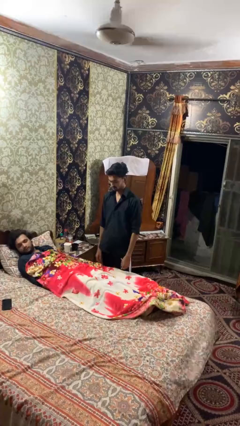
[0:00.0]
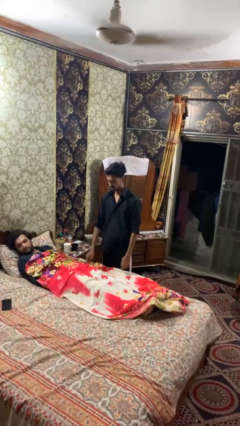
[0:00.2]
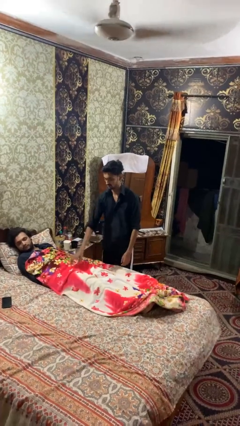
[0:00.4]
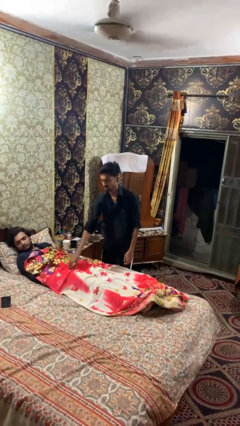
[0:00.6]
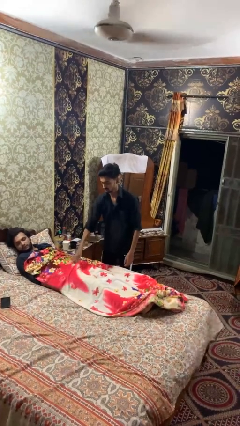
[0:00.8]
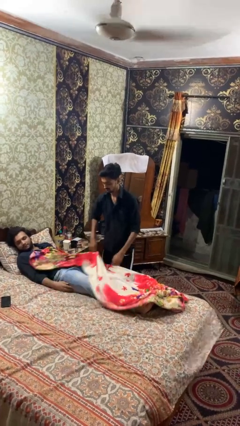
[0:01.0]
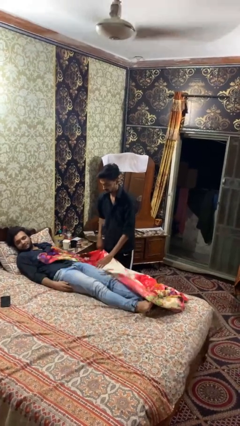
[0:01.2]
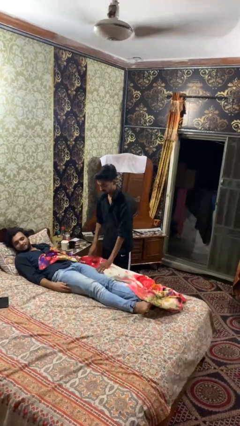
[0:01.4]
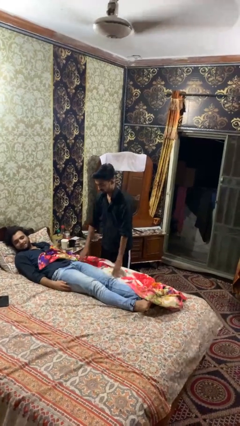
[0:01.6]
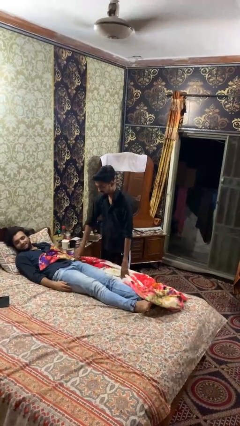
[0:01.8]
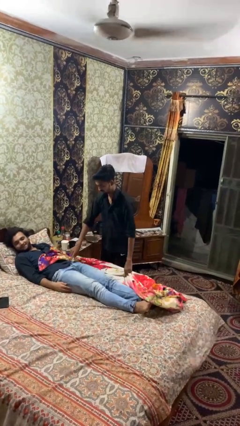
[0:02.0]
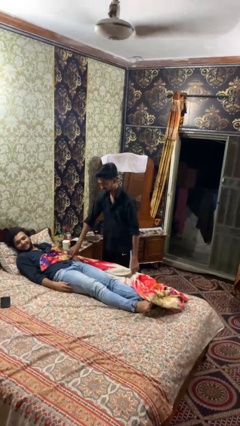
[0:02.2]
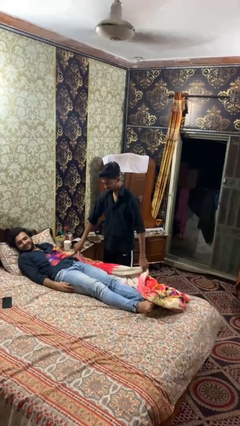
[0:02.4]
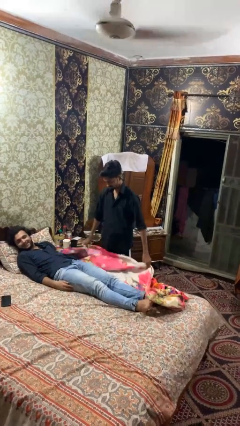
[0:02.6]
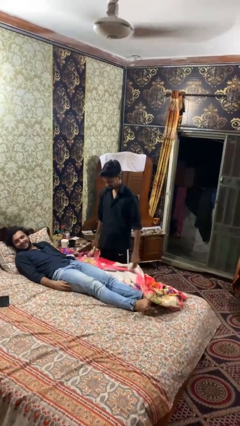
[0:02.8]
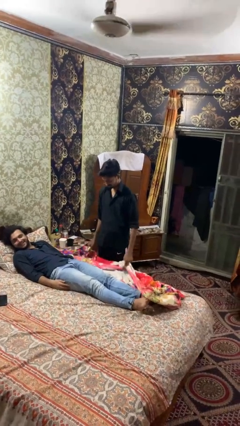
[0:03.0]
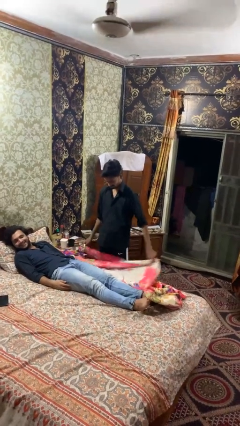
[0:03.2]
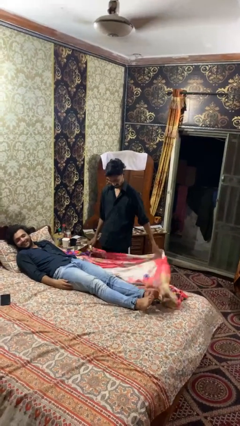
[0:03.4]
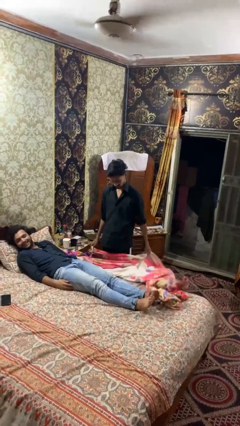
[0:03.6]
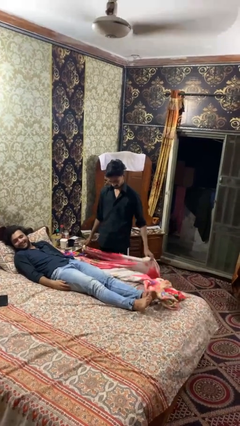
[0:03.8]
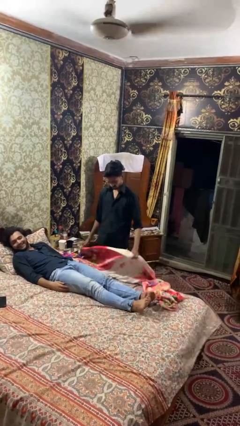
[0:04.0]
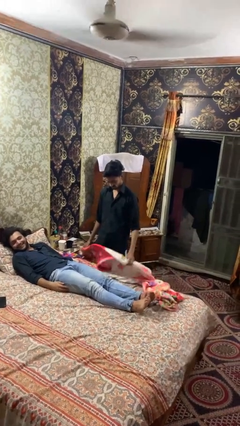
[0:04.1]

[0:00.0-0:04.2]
person uncovers friend with blanket

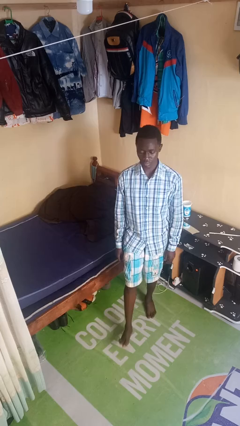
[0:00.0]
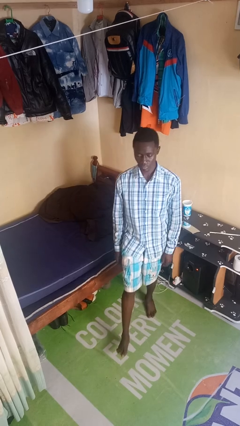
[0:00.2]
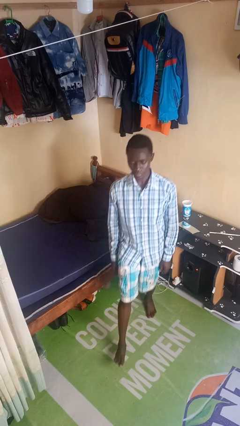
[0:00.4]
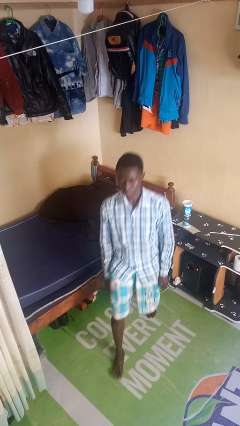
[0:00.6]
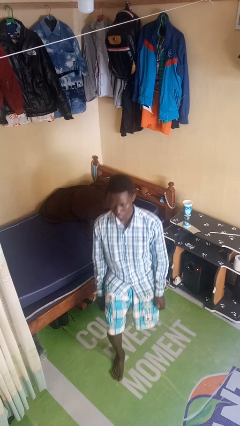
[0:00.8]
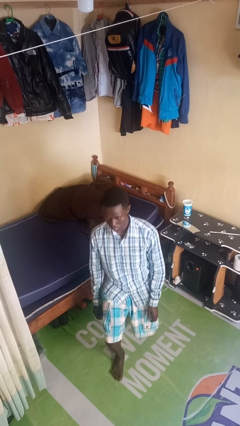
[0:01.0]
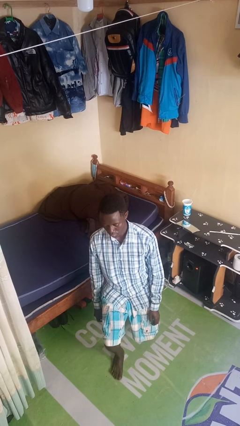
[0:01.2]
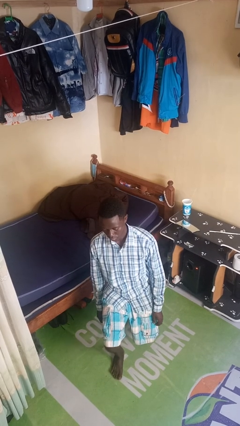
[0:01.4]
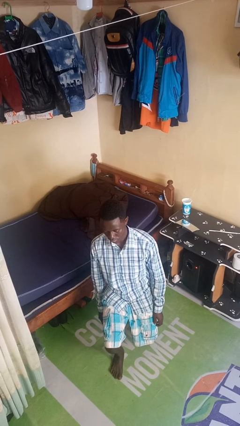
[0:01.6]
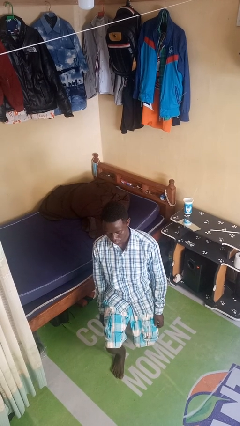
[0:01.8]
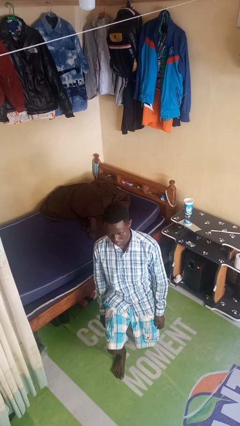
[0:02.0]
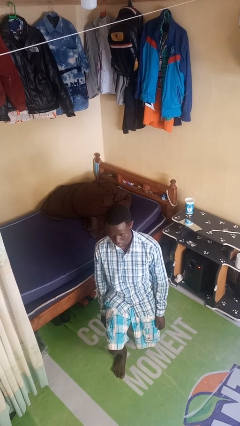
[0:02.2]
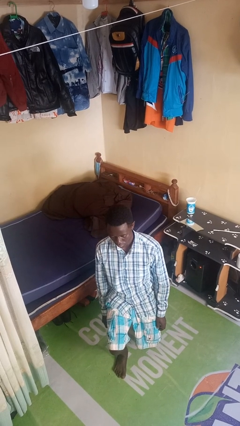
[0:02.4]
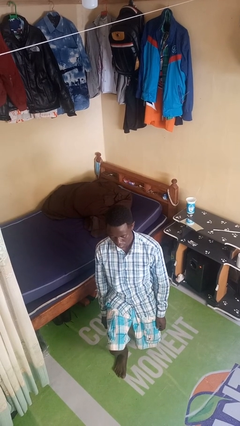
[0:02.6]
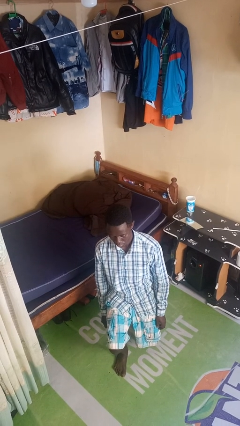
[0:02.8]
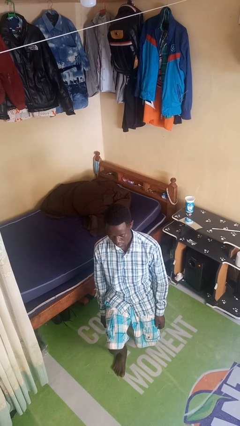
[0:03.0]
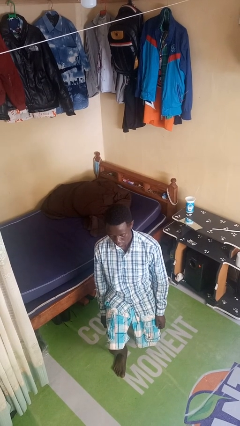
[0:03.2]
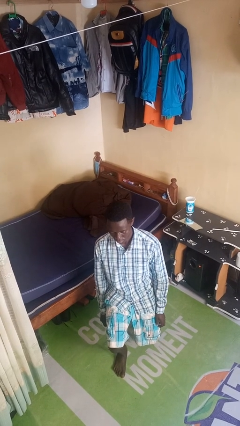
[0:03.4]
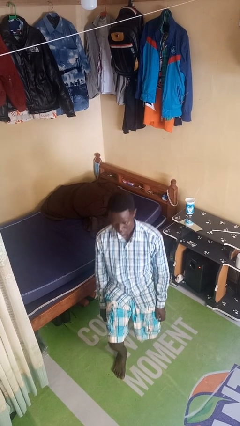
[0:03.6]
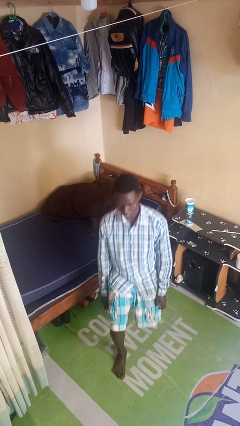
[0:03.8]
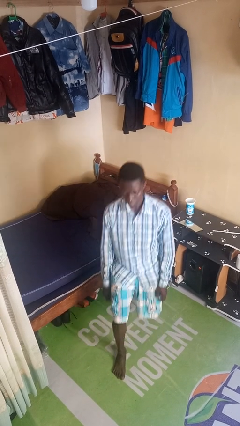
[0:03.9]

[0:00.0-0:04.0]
person exercises with lunges

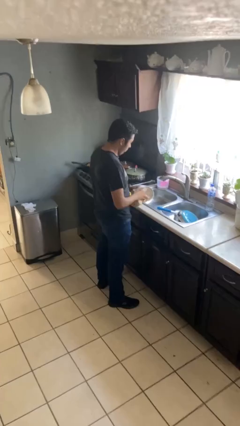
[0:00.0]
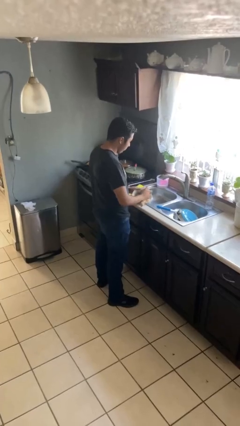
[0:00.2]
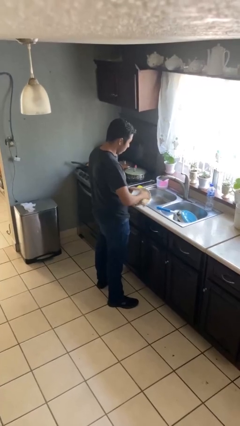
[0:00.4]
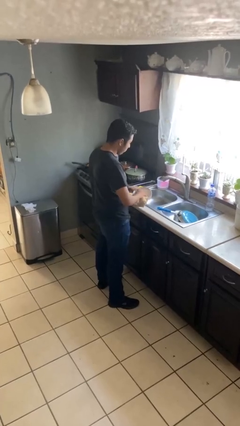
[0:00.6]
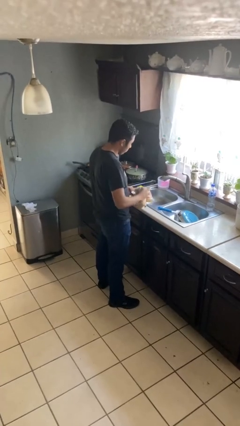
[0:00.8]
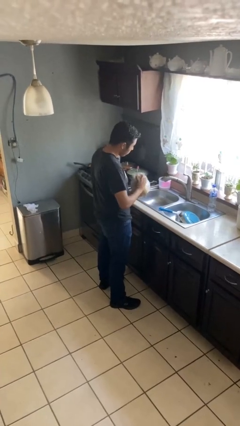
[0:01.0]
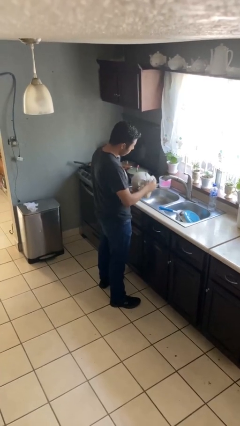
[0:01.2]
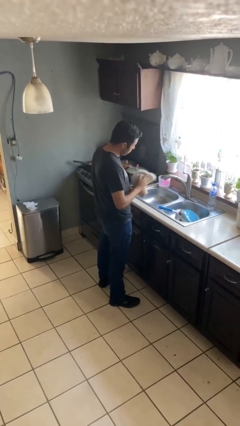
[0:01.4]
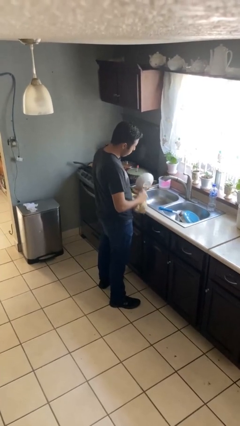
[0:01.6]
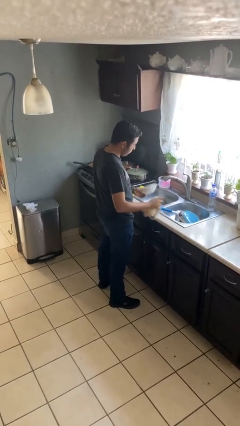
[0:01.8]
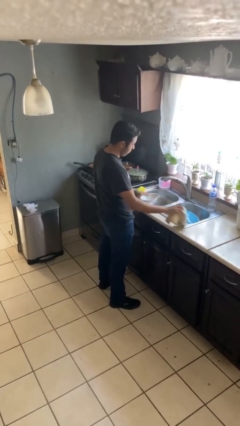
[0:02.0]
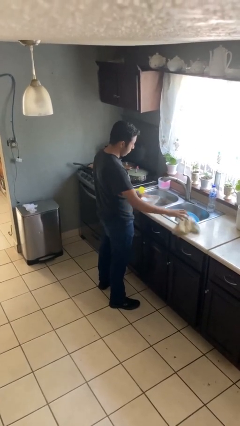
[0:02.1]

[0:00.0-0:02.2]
person dries dish

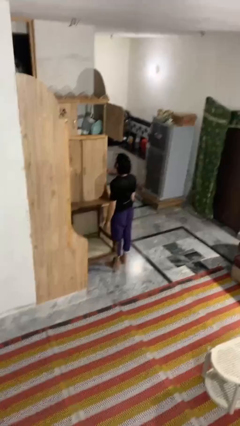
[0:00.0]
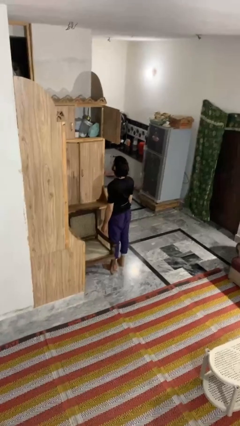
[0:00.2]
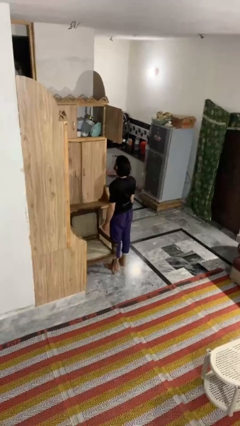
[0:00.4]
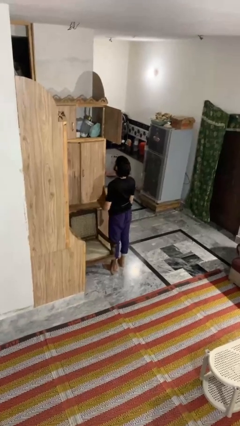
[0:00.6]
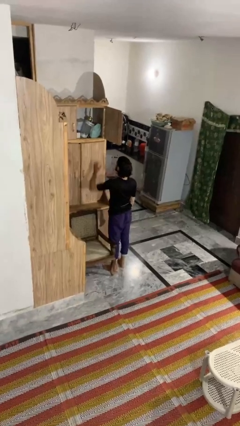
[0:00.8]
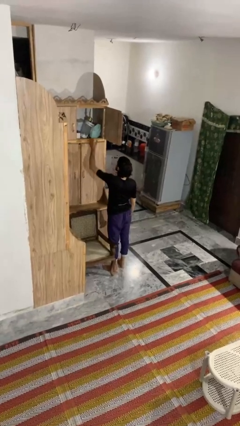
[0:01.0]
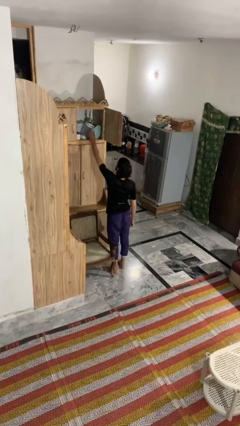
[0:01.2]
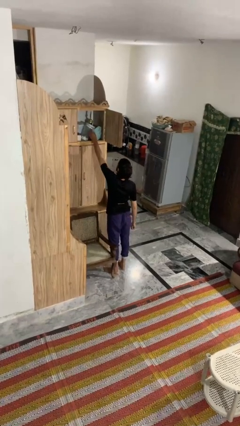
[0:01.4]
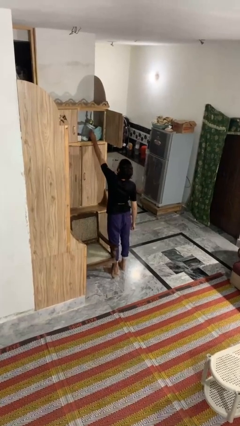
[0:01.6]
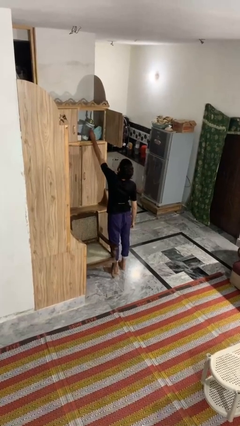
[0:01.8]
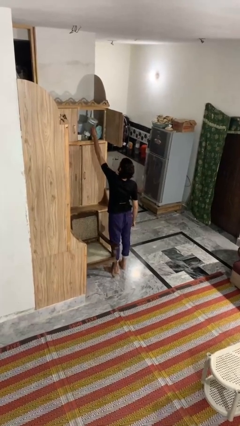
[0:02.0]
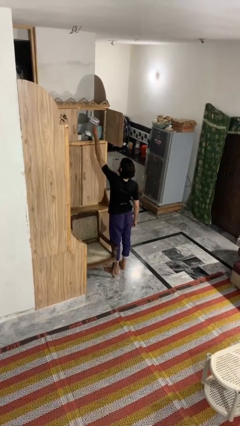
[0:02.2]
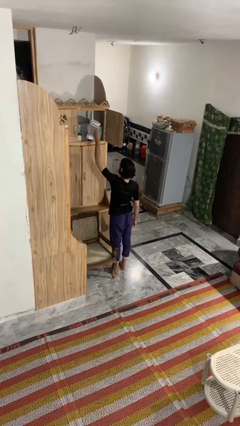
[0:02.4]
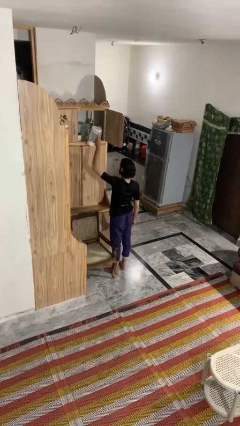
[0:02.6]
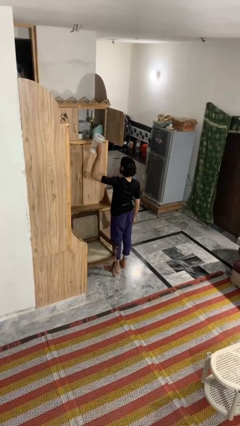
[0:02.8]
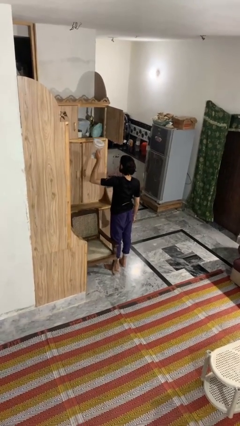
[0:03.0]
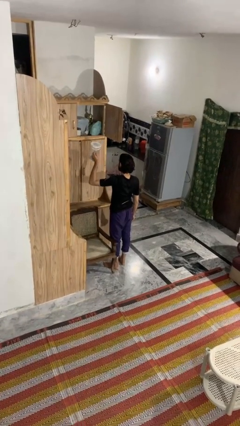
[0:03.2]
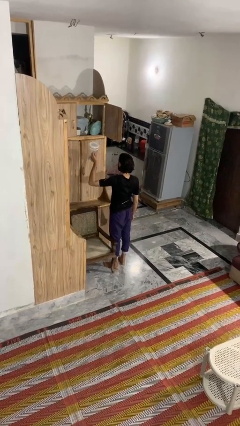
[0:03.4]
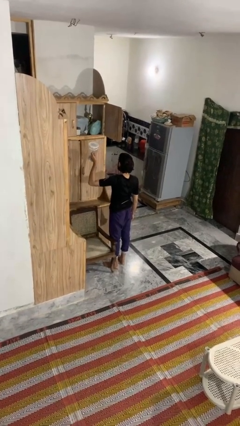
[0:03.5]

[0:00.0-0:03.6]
person picks up object from shelf

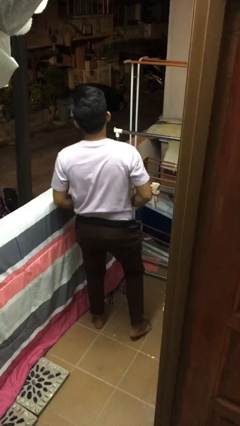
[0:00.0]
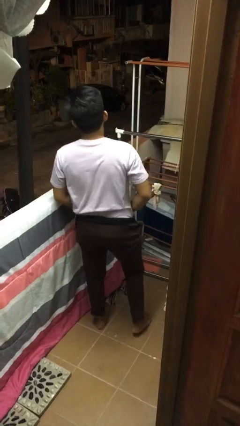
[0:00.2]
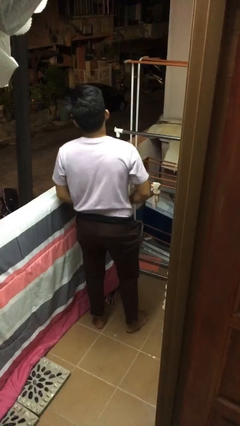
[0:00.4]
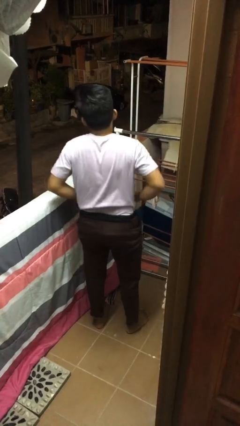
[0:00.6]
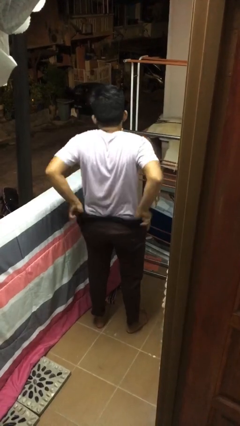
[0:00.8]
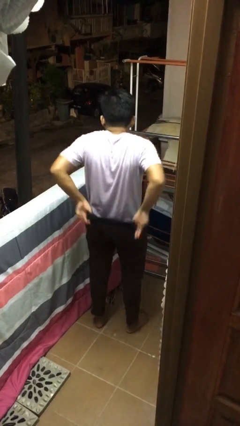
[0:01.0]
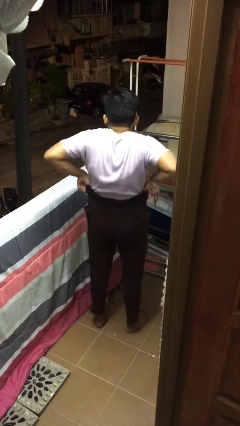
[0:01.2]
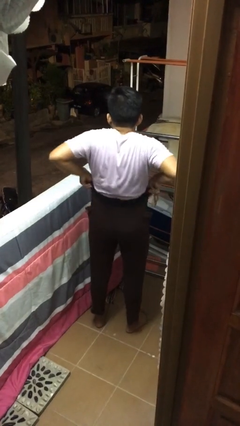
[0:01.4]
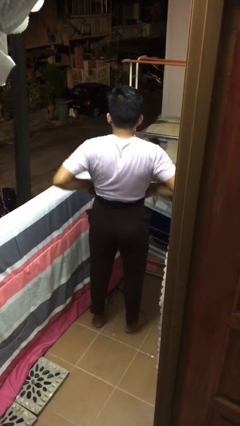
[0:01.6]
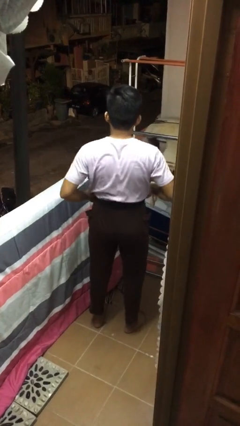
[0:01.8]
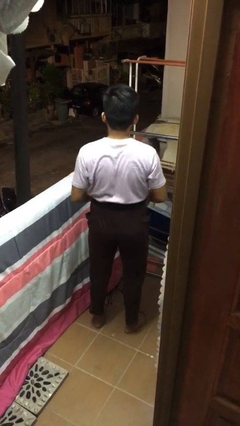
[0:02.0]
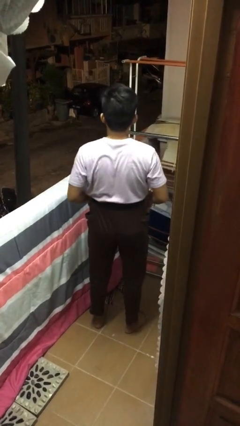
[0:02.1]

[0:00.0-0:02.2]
person hikes up pants

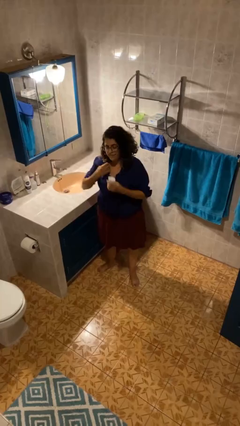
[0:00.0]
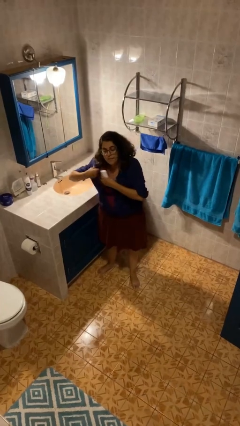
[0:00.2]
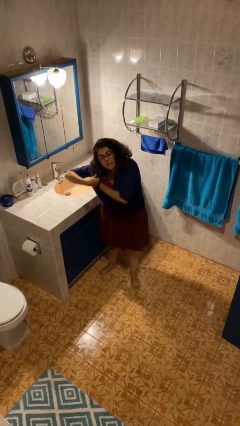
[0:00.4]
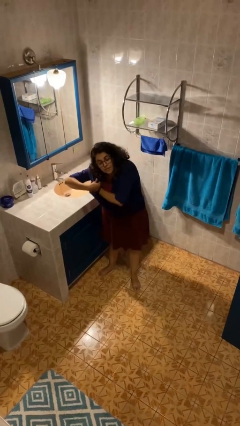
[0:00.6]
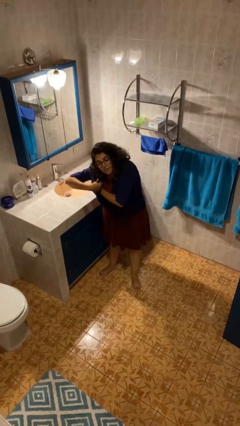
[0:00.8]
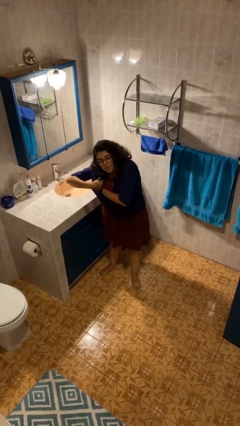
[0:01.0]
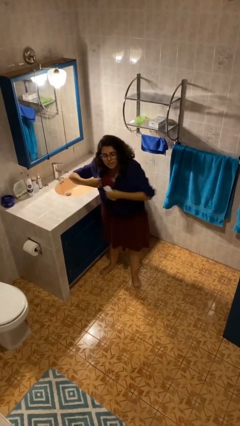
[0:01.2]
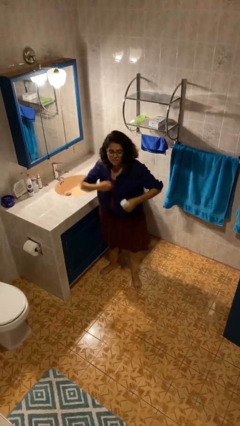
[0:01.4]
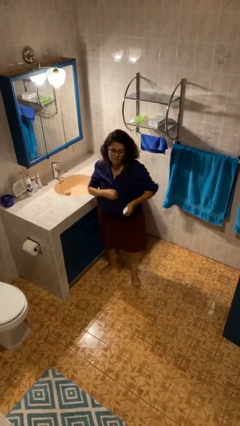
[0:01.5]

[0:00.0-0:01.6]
person applies deodorant
